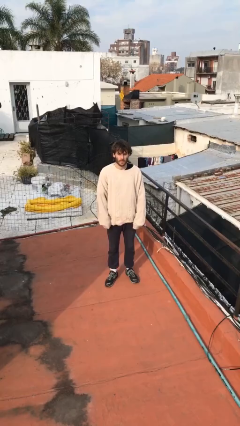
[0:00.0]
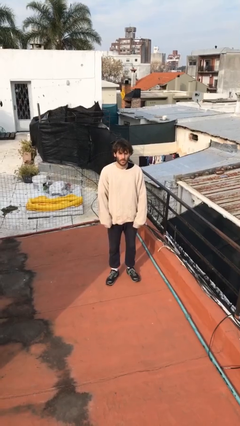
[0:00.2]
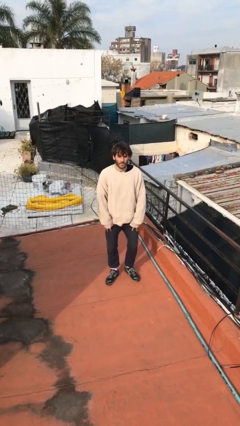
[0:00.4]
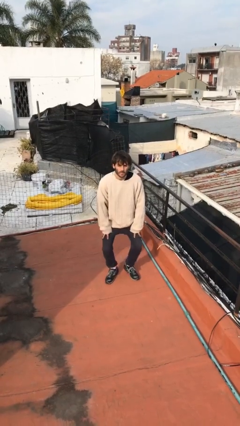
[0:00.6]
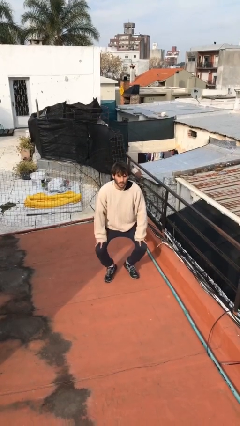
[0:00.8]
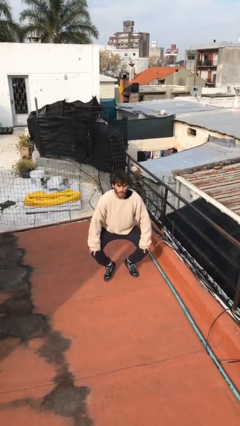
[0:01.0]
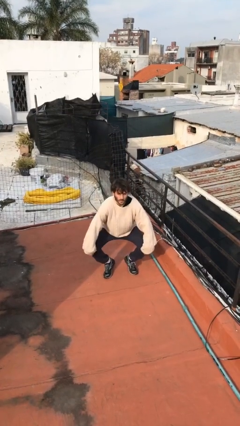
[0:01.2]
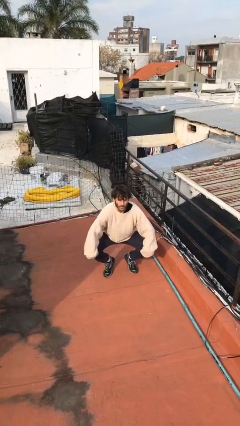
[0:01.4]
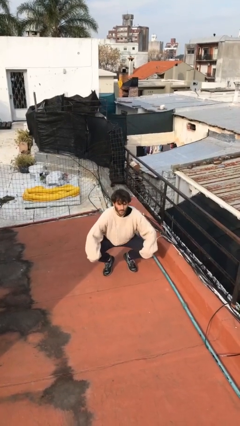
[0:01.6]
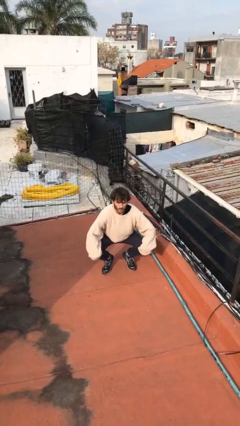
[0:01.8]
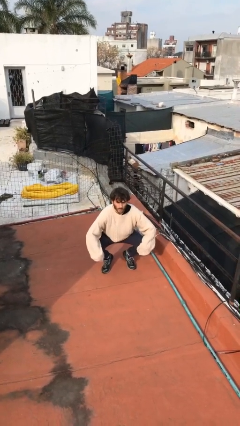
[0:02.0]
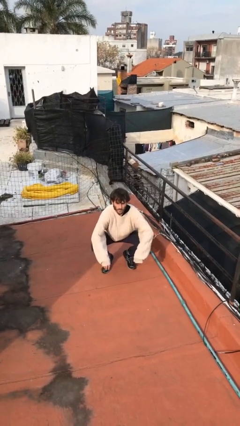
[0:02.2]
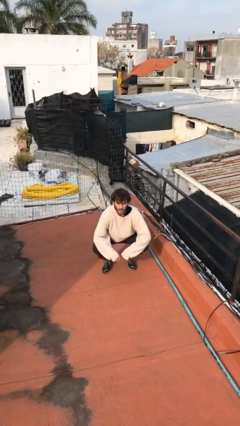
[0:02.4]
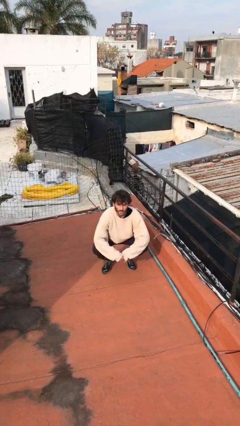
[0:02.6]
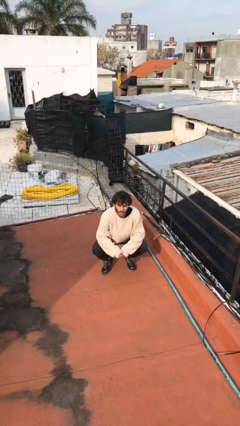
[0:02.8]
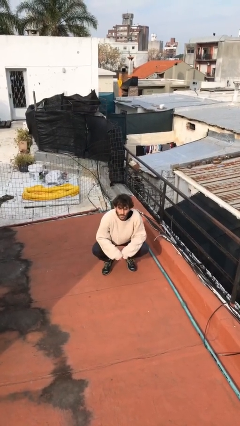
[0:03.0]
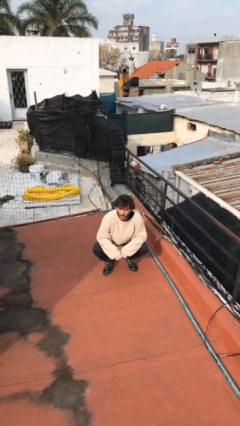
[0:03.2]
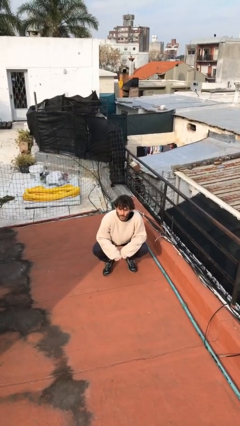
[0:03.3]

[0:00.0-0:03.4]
person squats

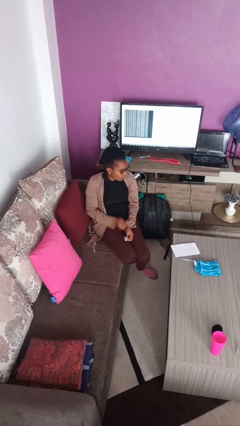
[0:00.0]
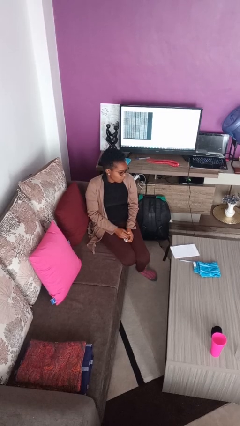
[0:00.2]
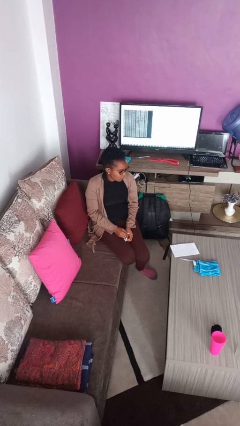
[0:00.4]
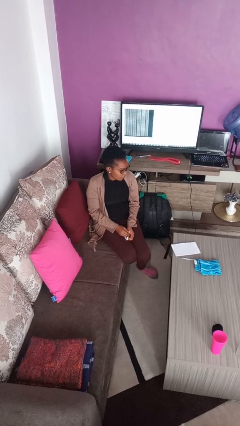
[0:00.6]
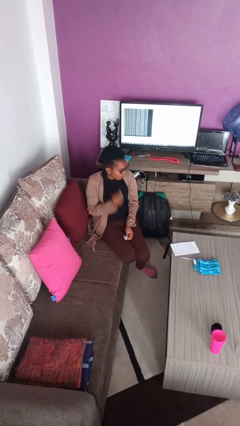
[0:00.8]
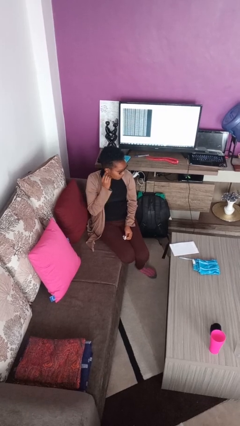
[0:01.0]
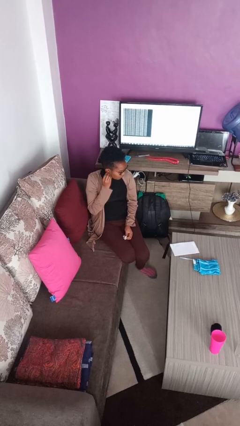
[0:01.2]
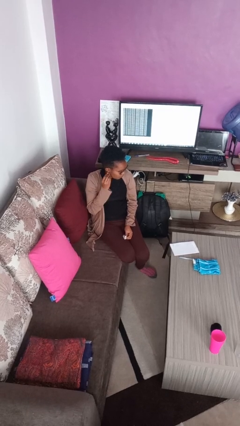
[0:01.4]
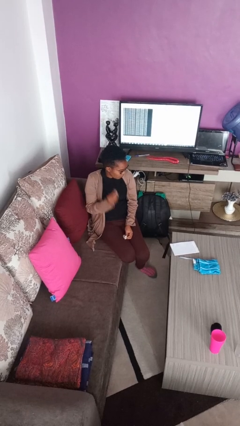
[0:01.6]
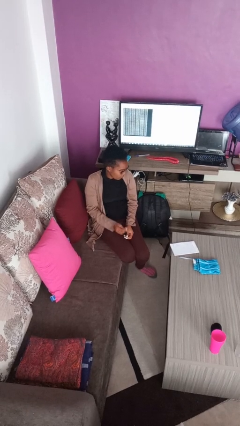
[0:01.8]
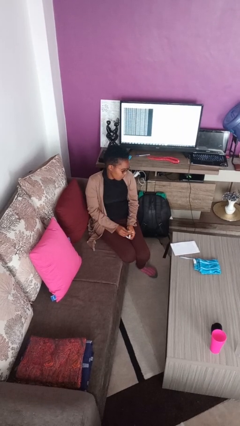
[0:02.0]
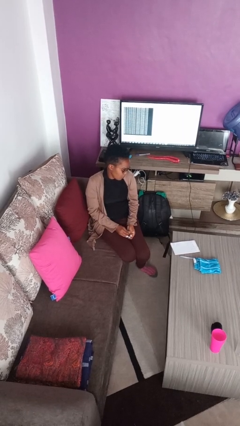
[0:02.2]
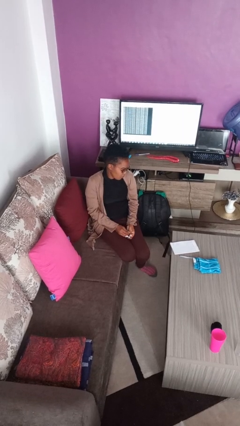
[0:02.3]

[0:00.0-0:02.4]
person takes off earrings

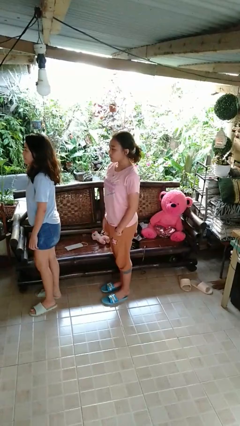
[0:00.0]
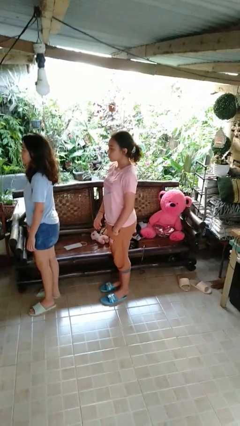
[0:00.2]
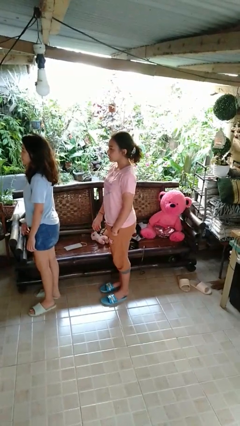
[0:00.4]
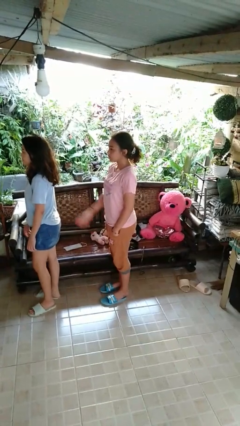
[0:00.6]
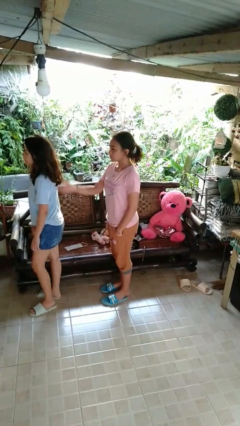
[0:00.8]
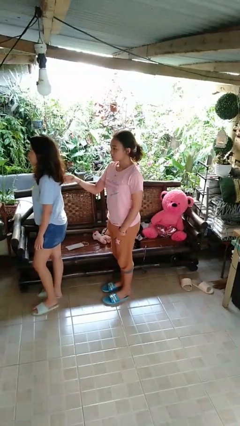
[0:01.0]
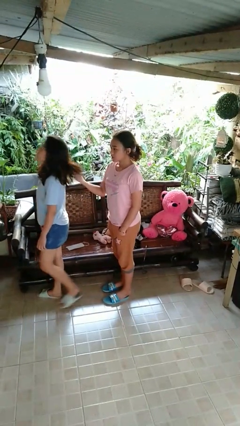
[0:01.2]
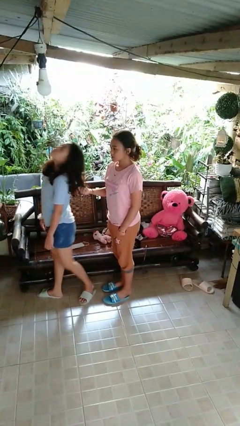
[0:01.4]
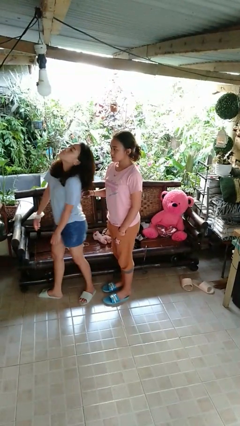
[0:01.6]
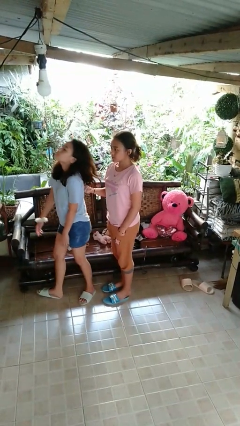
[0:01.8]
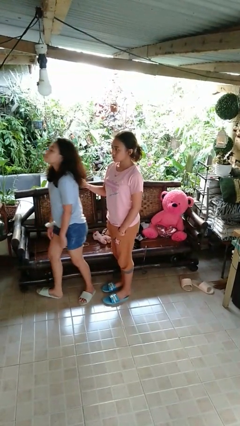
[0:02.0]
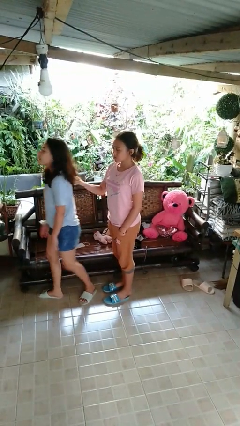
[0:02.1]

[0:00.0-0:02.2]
person grabs person by hair

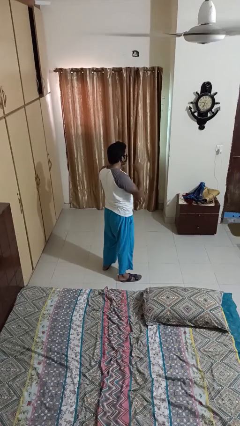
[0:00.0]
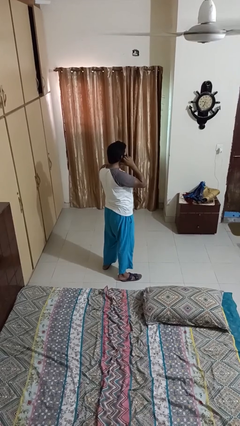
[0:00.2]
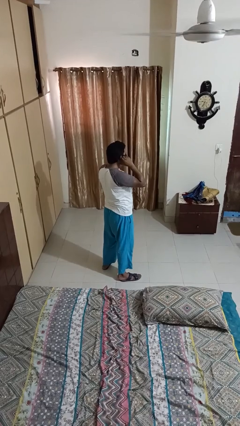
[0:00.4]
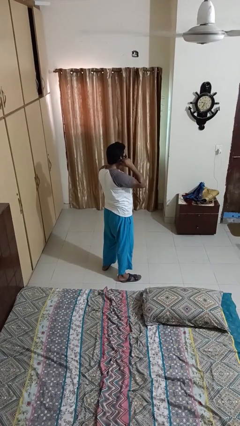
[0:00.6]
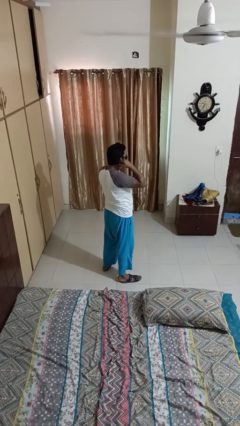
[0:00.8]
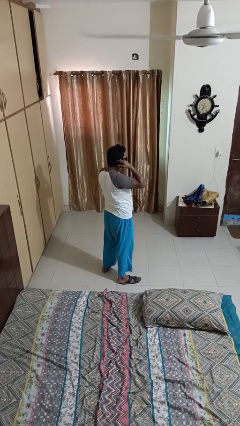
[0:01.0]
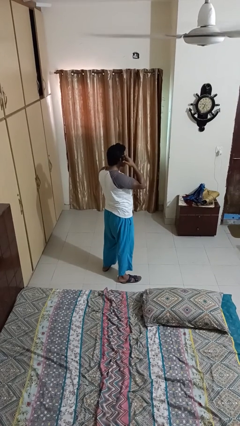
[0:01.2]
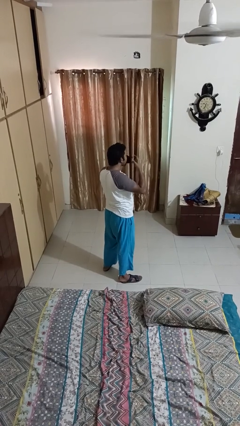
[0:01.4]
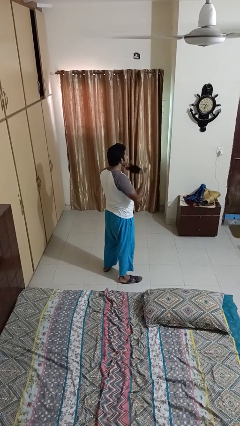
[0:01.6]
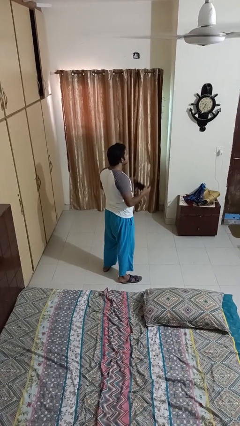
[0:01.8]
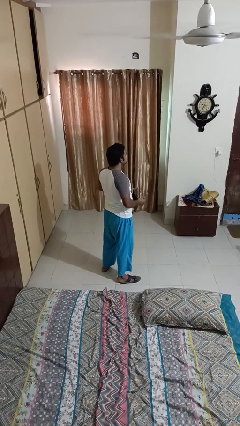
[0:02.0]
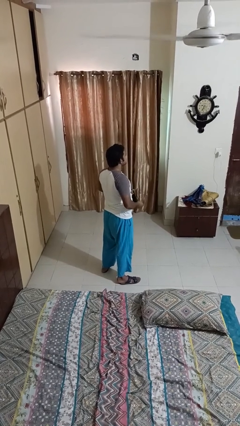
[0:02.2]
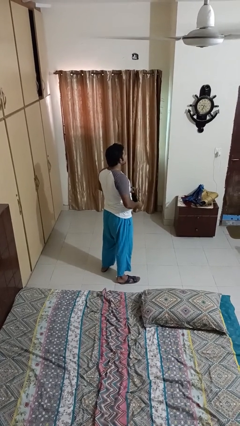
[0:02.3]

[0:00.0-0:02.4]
person takes off facemask

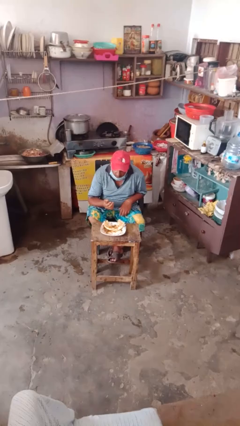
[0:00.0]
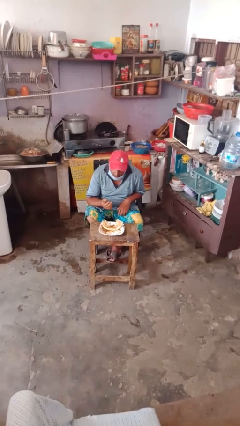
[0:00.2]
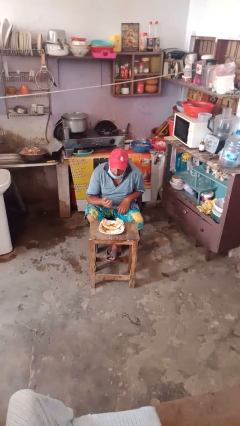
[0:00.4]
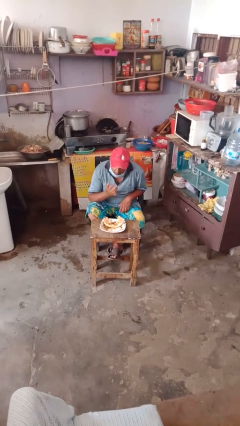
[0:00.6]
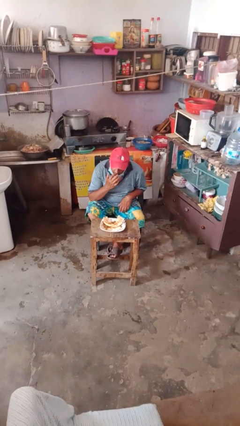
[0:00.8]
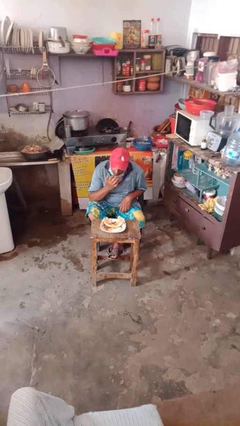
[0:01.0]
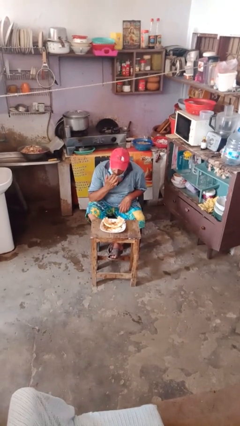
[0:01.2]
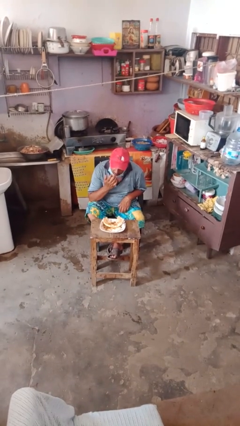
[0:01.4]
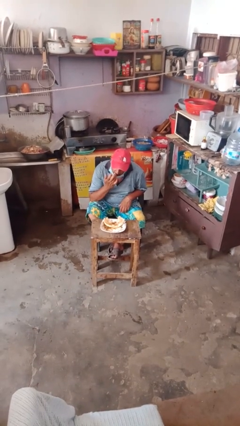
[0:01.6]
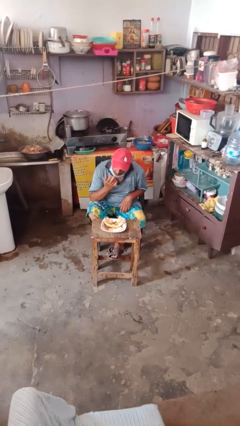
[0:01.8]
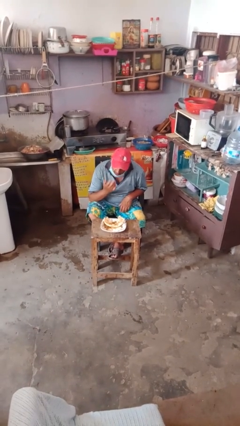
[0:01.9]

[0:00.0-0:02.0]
person licks fingers

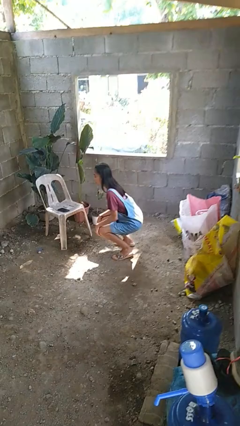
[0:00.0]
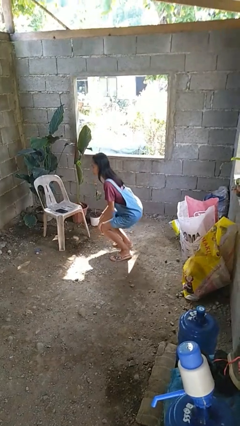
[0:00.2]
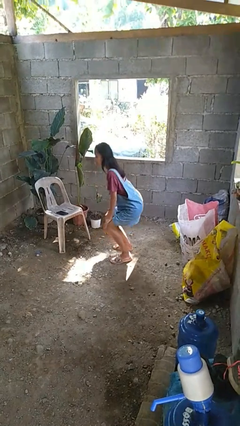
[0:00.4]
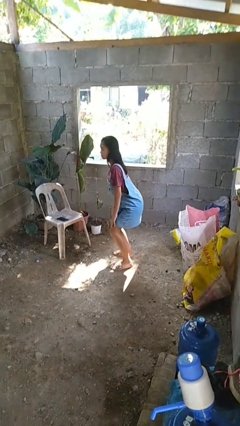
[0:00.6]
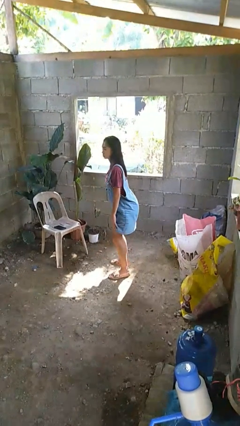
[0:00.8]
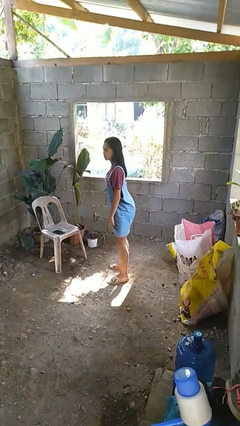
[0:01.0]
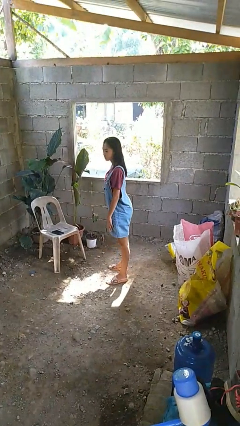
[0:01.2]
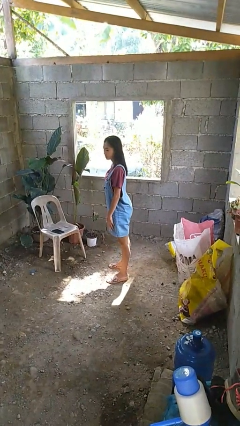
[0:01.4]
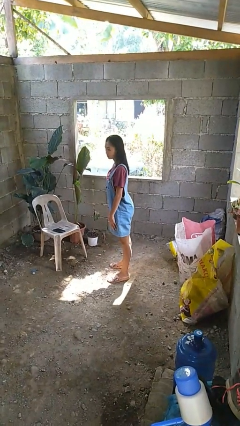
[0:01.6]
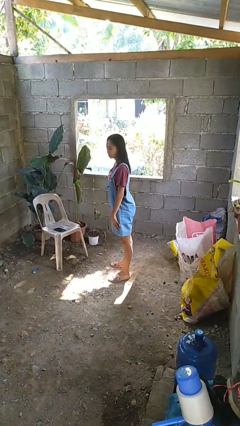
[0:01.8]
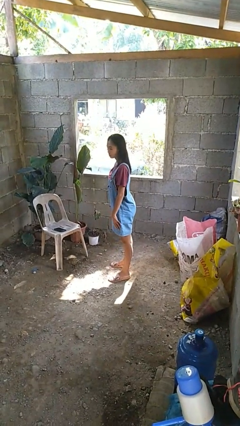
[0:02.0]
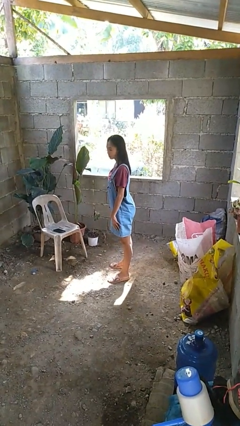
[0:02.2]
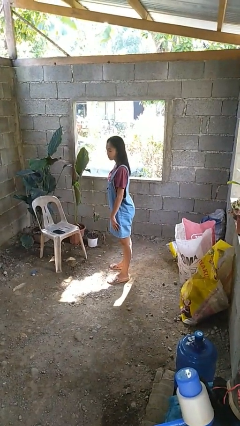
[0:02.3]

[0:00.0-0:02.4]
person stands up

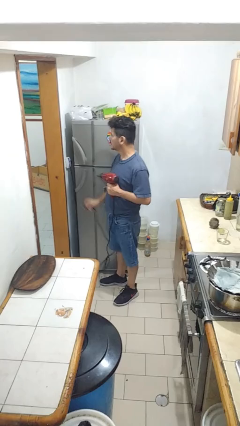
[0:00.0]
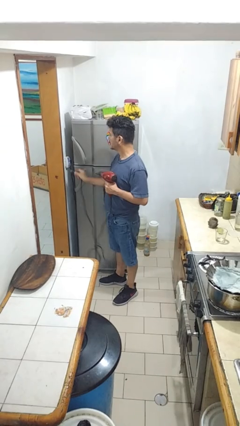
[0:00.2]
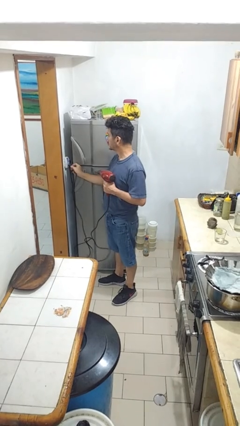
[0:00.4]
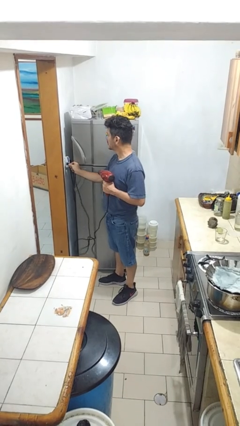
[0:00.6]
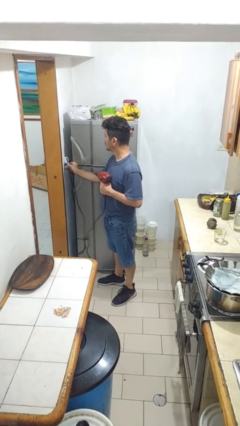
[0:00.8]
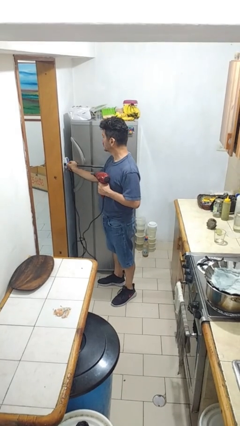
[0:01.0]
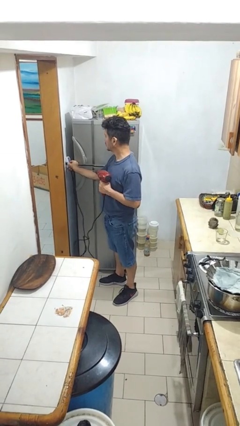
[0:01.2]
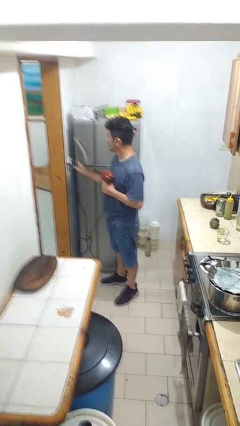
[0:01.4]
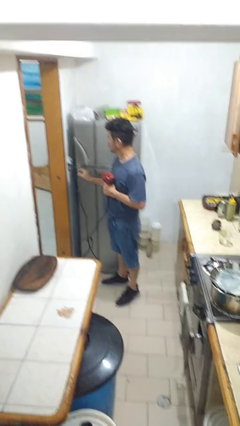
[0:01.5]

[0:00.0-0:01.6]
person plugs into electrical socket

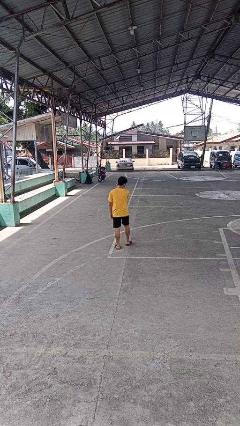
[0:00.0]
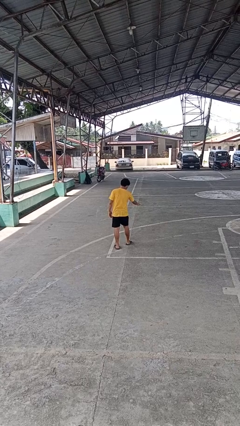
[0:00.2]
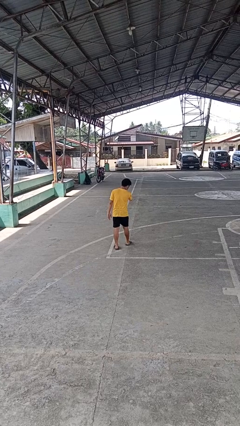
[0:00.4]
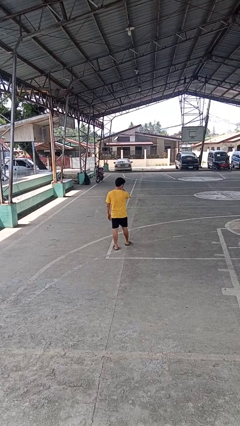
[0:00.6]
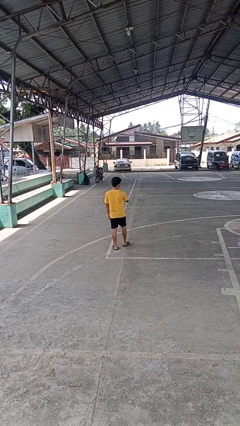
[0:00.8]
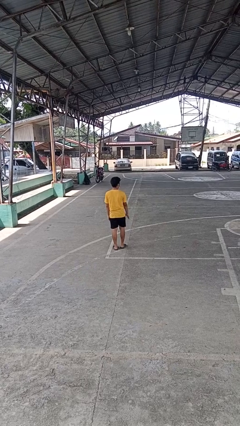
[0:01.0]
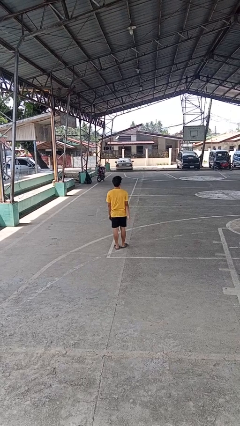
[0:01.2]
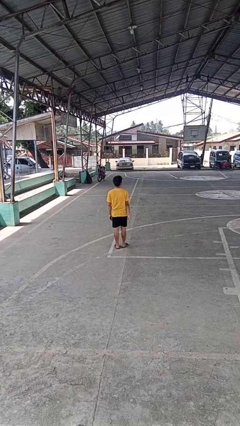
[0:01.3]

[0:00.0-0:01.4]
person karate chop
